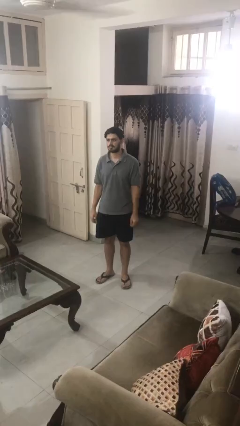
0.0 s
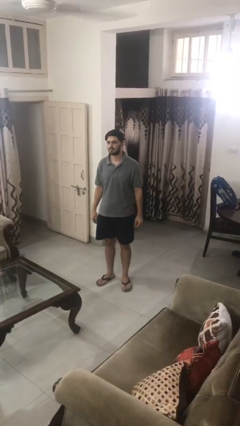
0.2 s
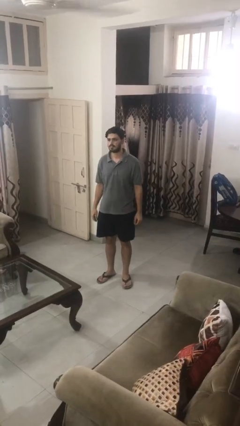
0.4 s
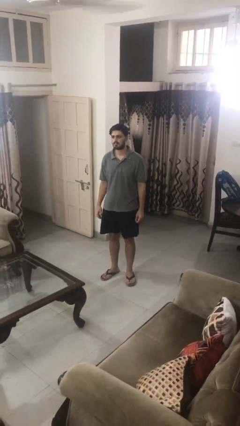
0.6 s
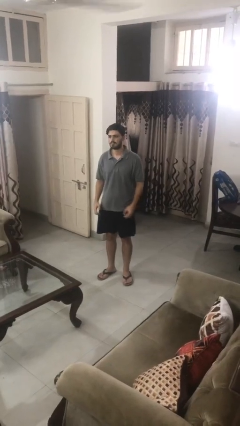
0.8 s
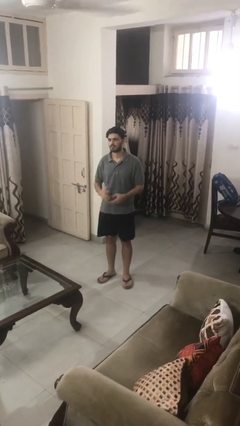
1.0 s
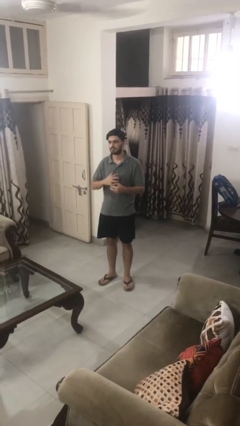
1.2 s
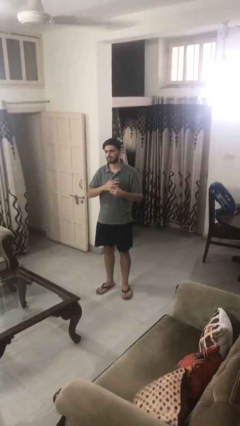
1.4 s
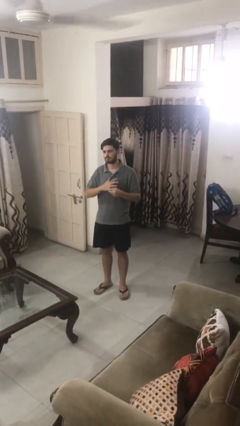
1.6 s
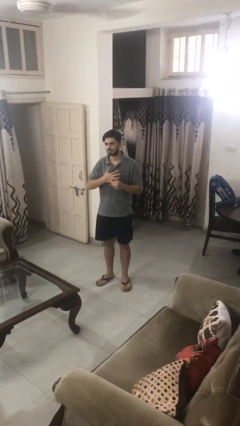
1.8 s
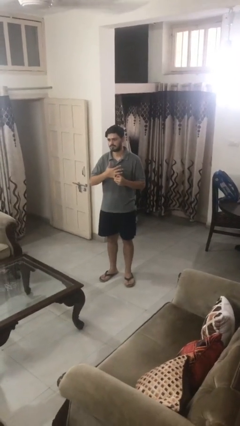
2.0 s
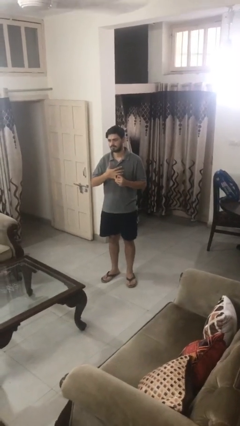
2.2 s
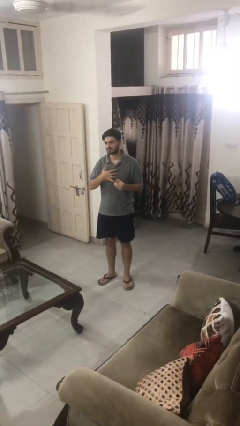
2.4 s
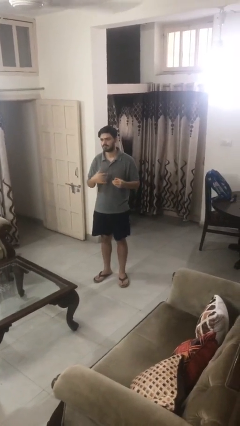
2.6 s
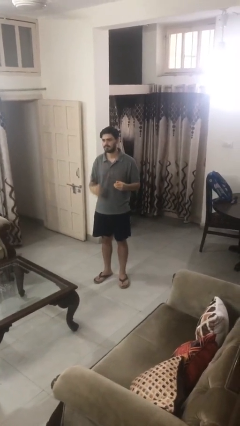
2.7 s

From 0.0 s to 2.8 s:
person takes off ring

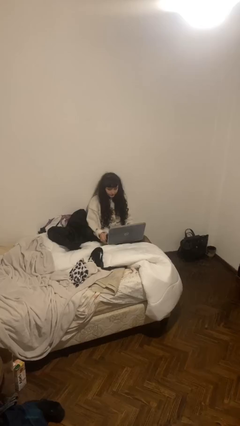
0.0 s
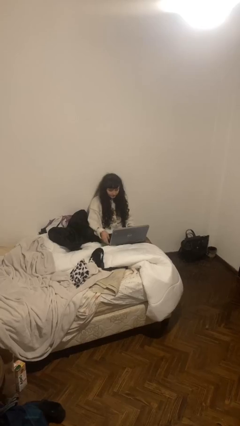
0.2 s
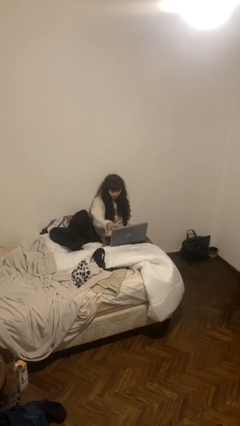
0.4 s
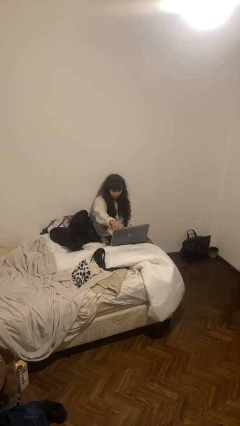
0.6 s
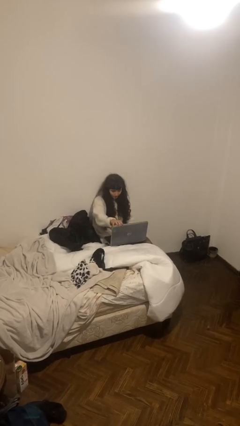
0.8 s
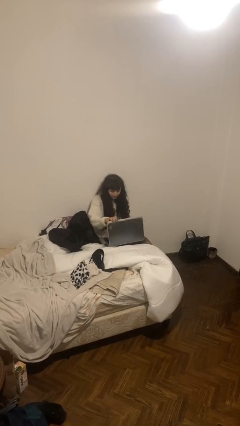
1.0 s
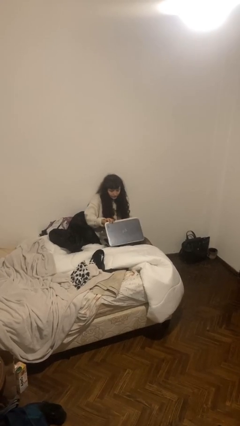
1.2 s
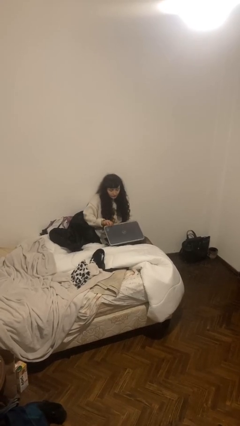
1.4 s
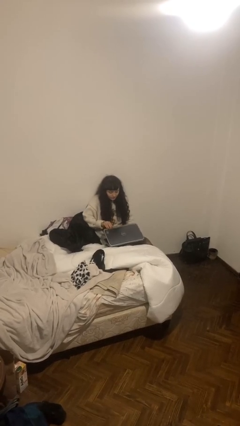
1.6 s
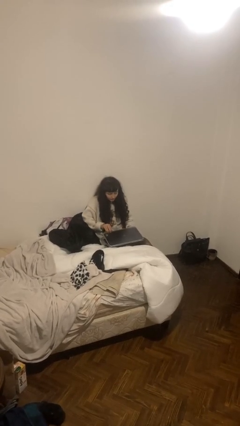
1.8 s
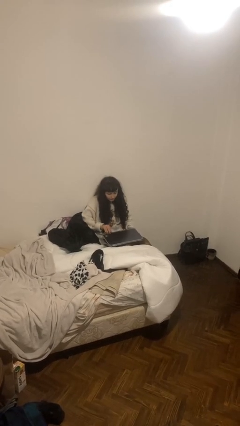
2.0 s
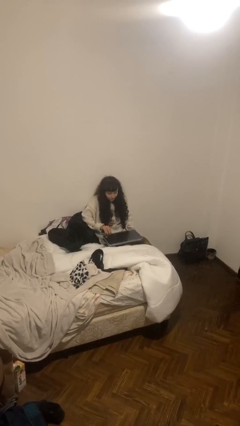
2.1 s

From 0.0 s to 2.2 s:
person closes laptop

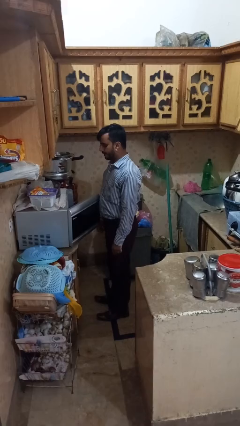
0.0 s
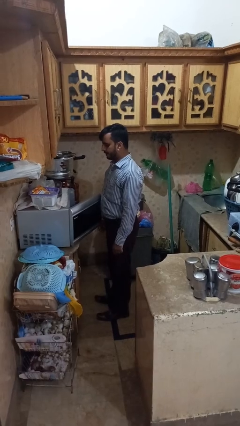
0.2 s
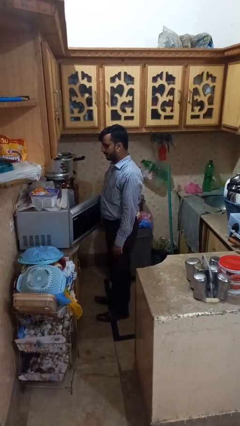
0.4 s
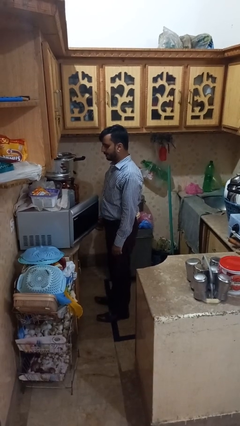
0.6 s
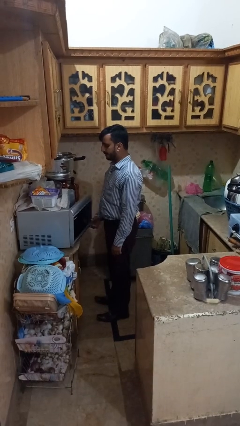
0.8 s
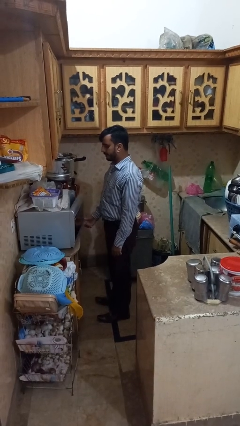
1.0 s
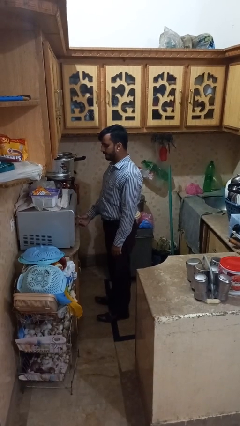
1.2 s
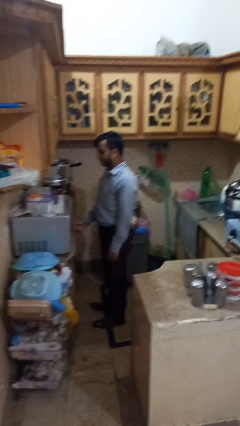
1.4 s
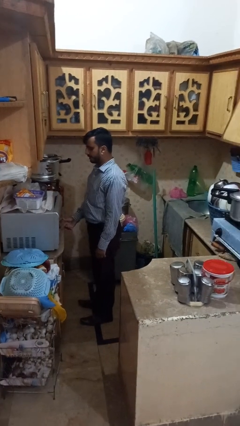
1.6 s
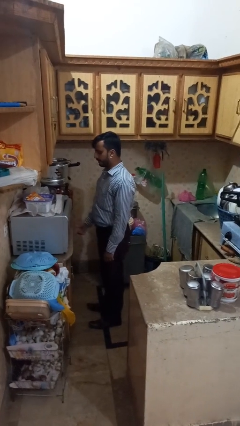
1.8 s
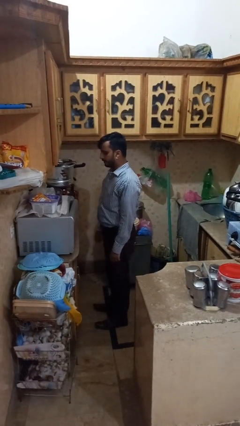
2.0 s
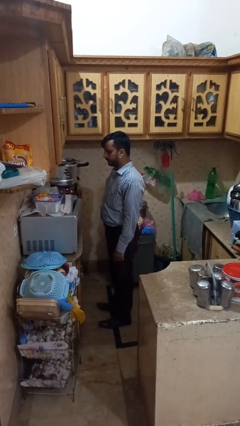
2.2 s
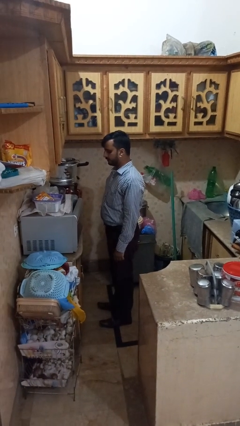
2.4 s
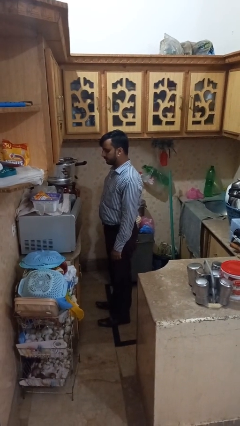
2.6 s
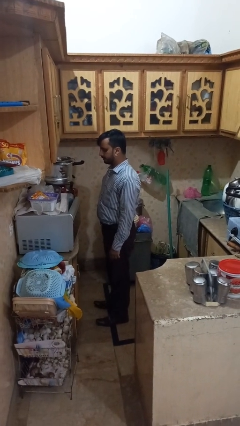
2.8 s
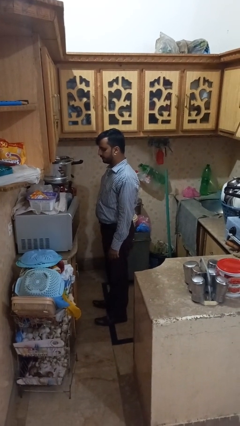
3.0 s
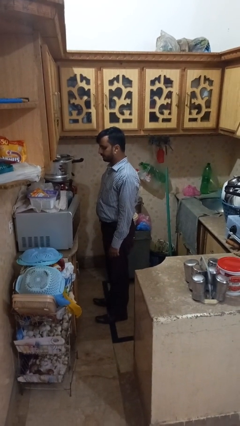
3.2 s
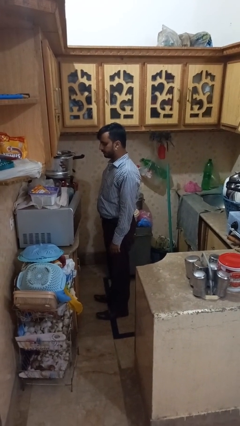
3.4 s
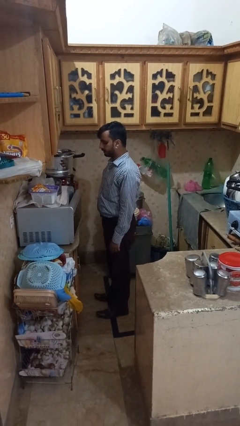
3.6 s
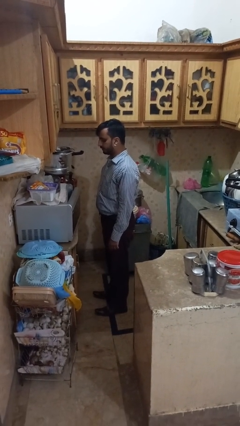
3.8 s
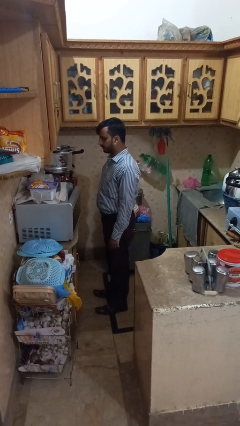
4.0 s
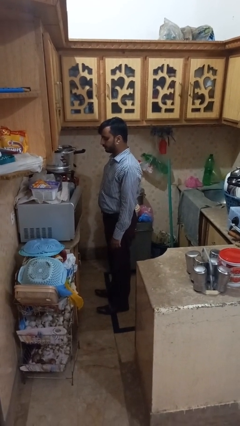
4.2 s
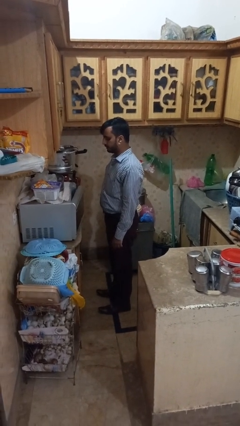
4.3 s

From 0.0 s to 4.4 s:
person closes microwave

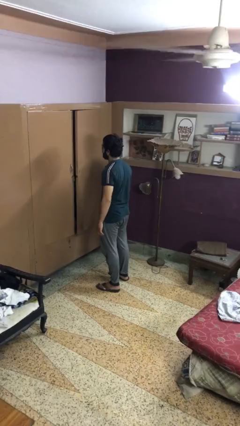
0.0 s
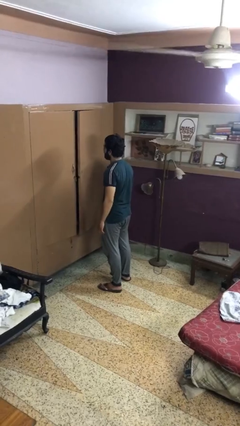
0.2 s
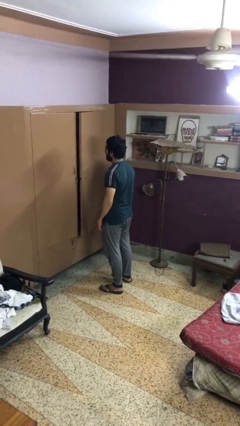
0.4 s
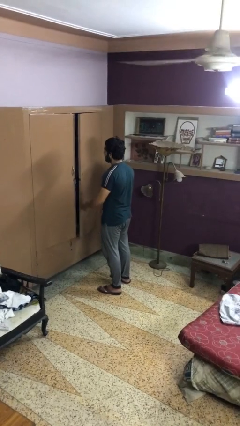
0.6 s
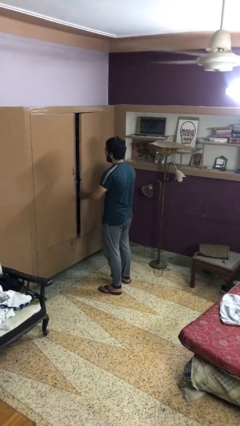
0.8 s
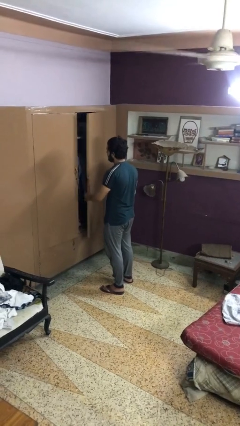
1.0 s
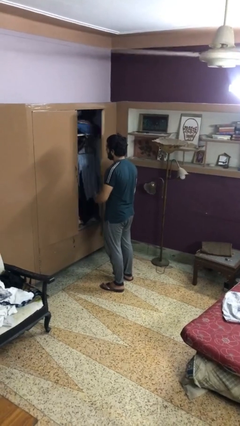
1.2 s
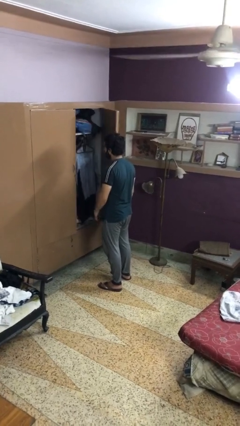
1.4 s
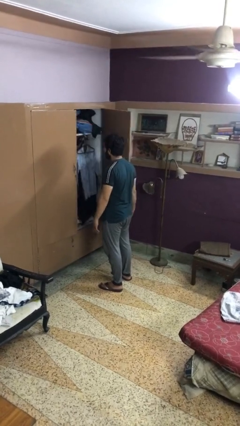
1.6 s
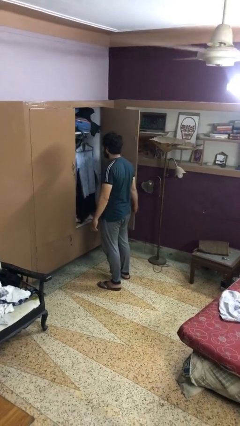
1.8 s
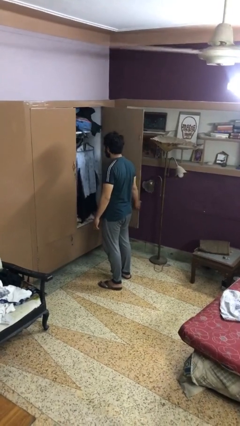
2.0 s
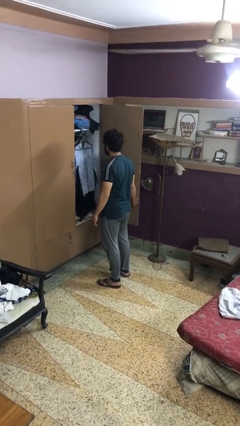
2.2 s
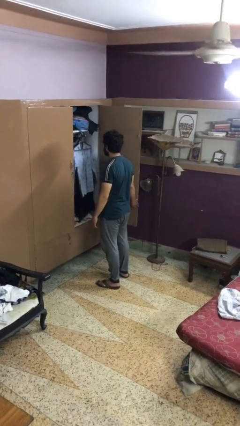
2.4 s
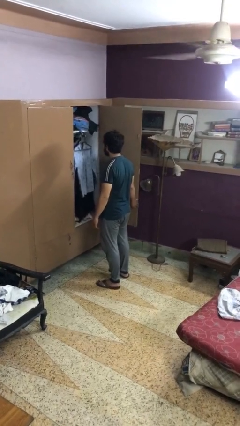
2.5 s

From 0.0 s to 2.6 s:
person opens closet door

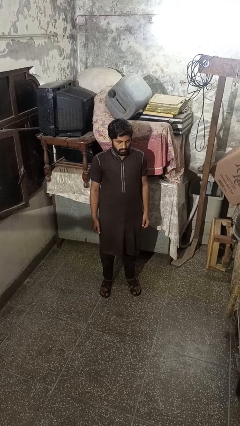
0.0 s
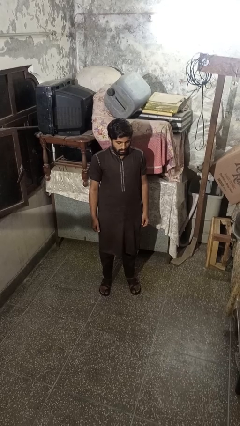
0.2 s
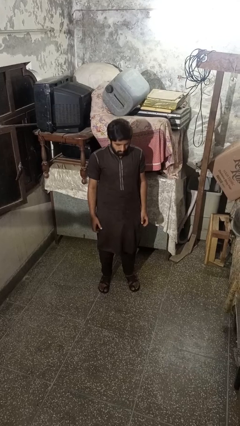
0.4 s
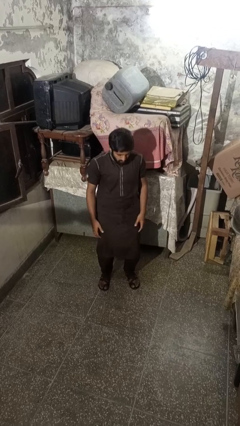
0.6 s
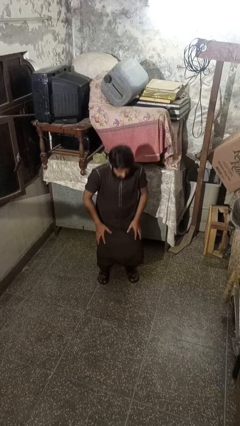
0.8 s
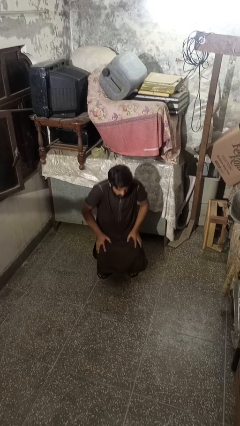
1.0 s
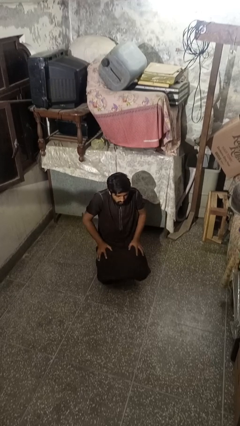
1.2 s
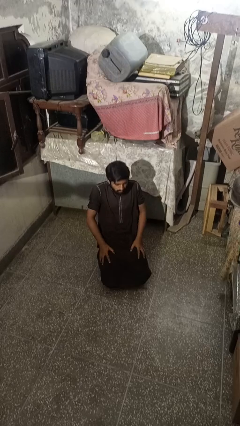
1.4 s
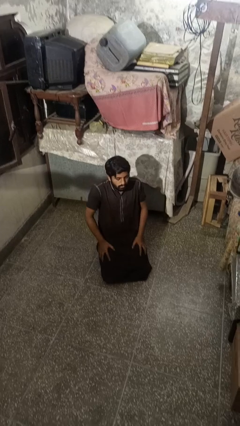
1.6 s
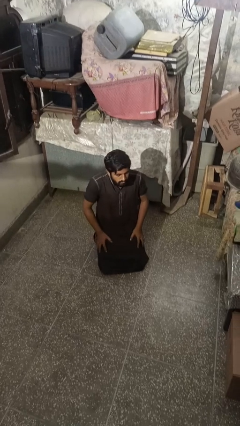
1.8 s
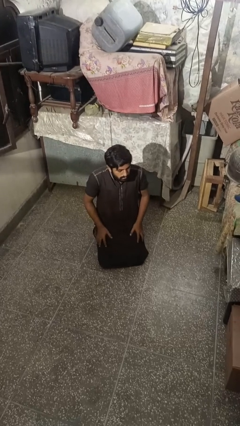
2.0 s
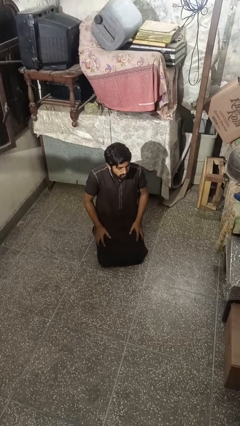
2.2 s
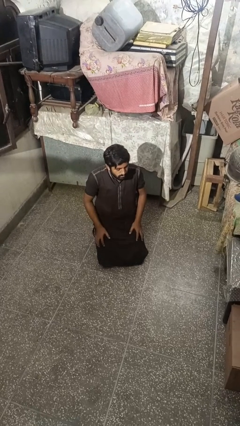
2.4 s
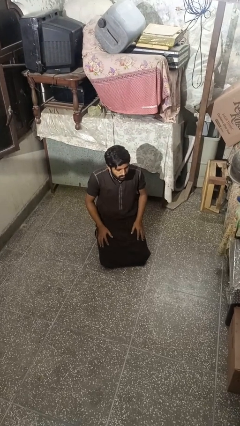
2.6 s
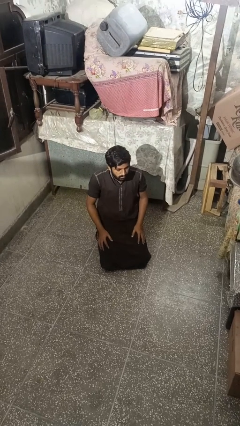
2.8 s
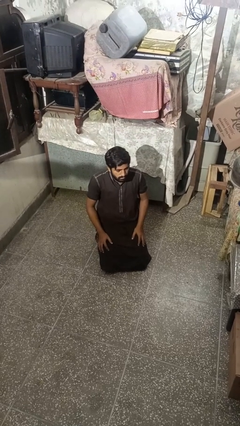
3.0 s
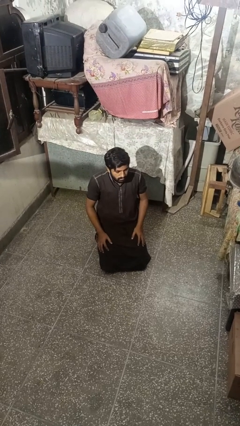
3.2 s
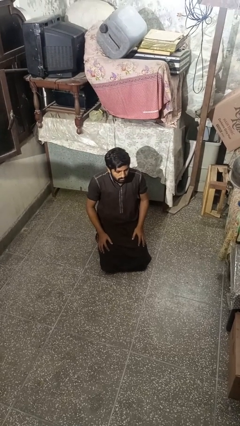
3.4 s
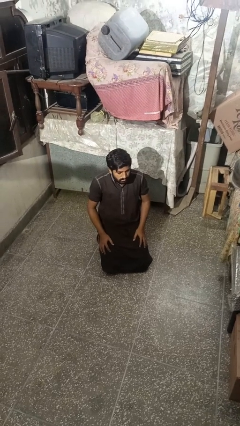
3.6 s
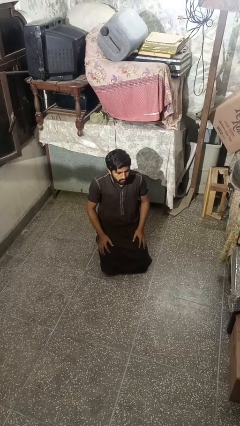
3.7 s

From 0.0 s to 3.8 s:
person kneels

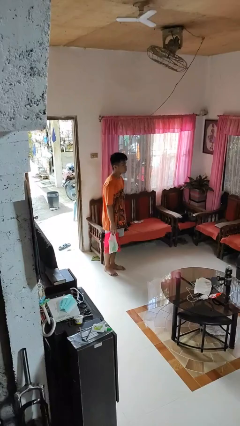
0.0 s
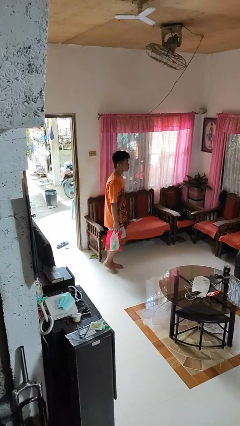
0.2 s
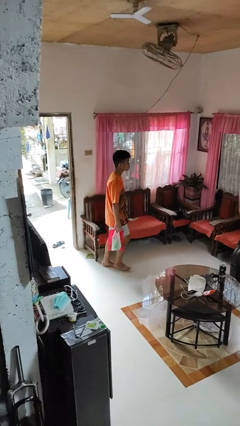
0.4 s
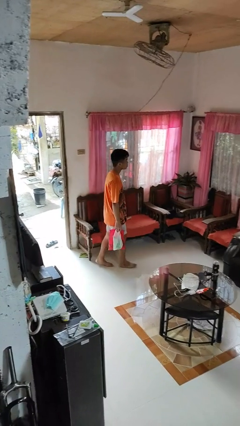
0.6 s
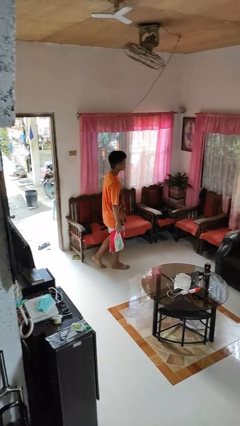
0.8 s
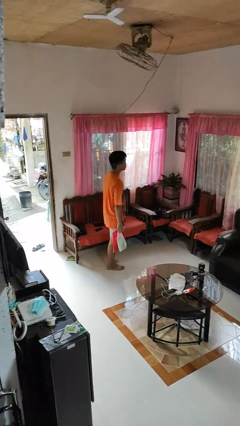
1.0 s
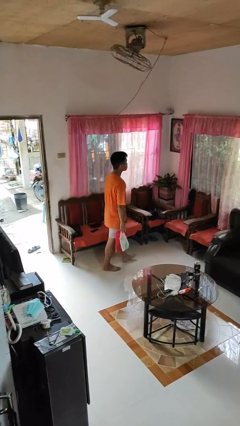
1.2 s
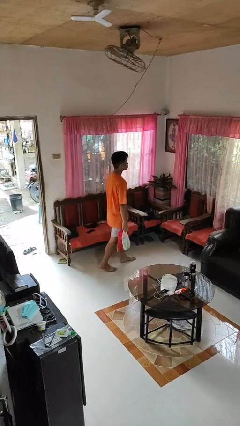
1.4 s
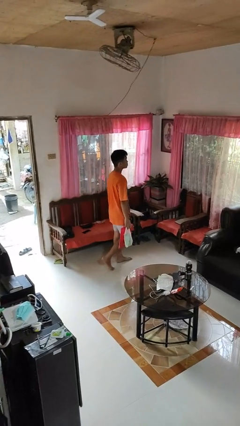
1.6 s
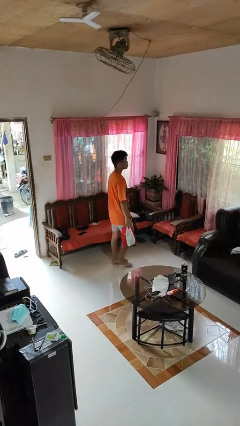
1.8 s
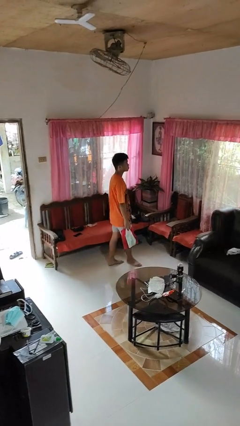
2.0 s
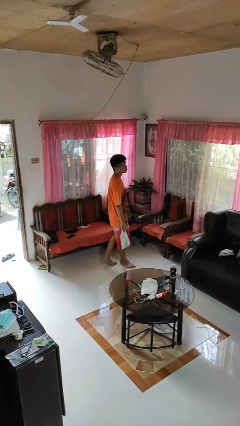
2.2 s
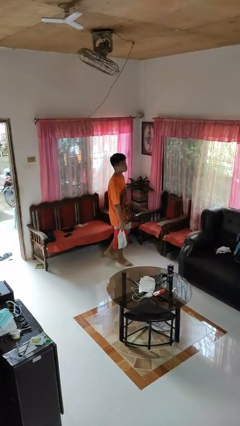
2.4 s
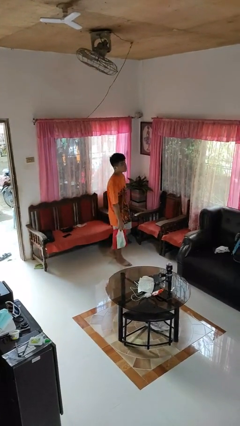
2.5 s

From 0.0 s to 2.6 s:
person carries groceries
